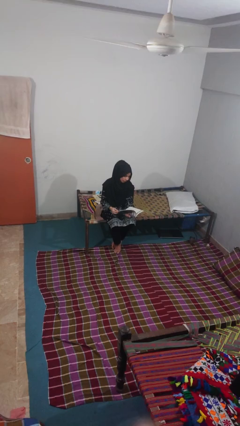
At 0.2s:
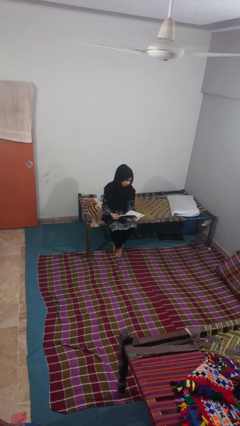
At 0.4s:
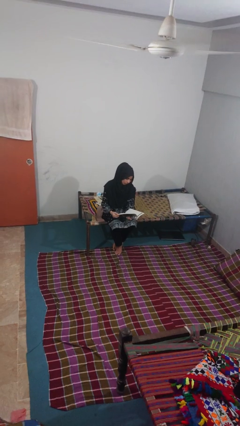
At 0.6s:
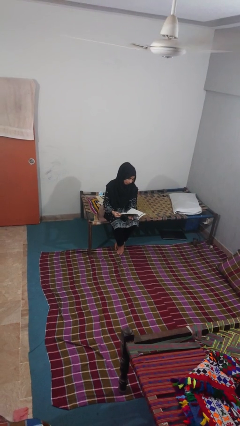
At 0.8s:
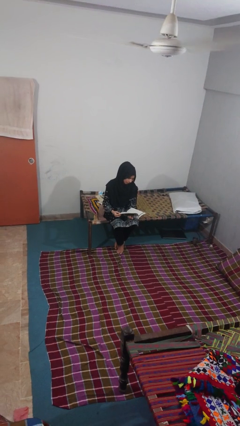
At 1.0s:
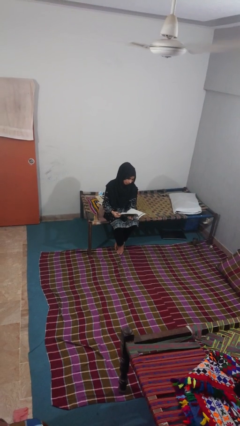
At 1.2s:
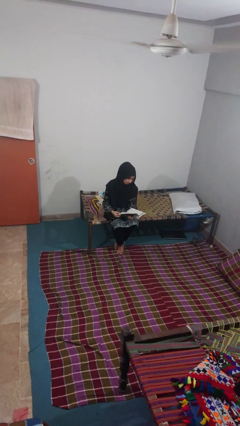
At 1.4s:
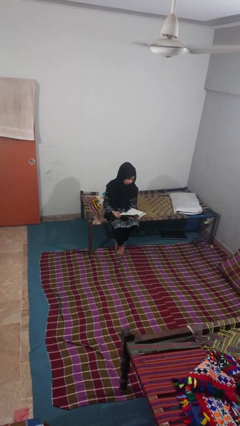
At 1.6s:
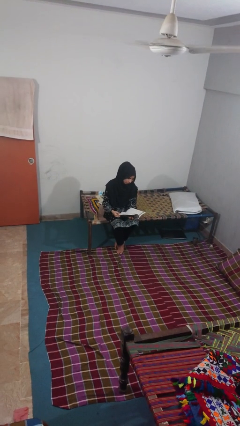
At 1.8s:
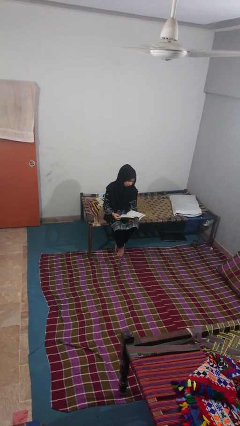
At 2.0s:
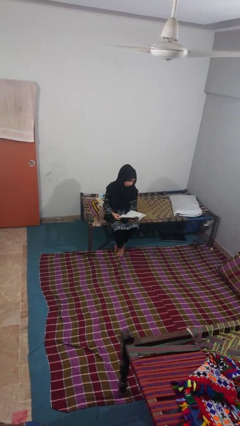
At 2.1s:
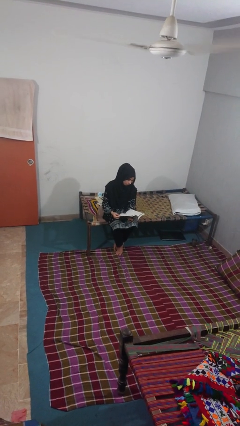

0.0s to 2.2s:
person reads book

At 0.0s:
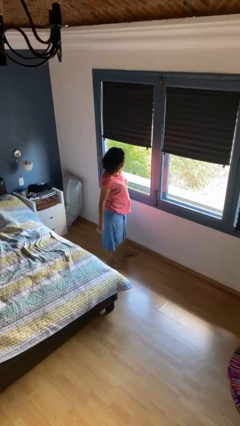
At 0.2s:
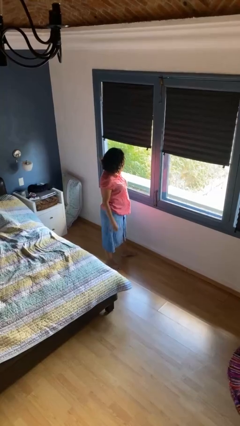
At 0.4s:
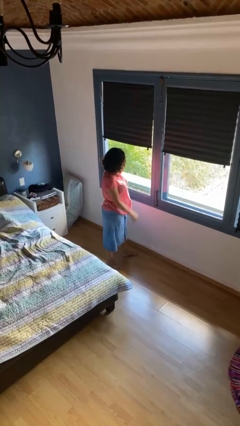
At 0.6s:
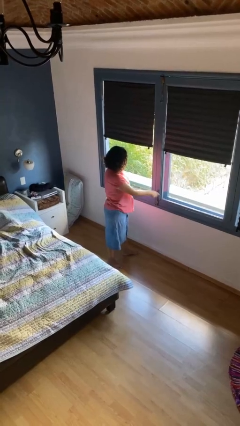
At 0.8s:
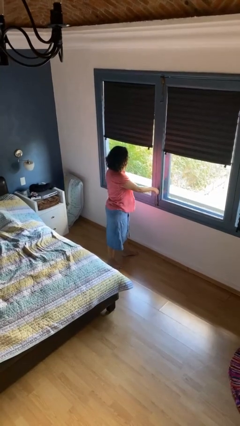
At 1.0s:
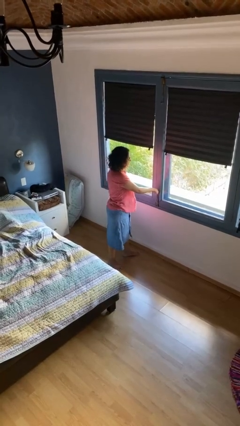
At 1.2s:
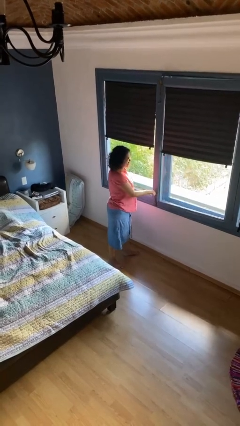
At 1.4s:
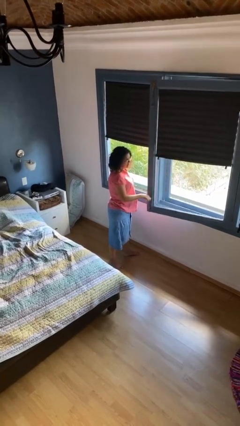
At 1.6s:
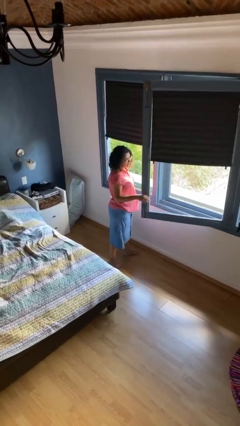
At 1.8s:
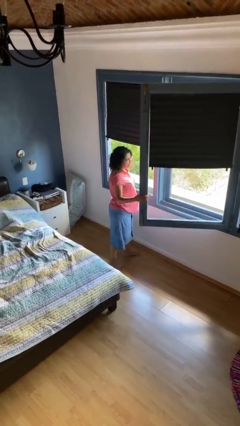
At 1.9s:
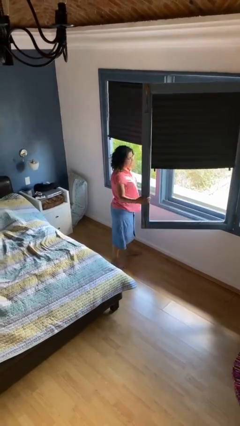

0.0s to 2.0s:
person opens home window

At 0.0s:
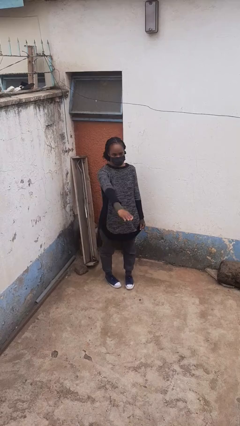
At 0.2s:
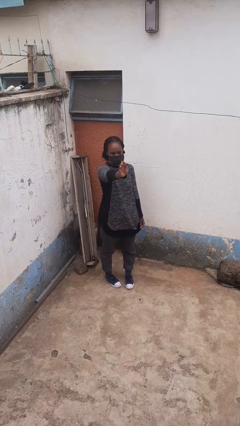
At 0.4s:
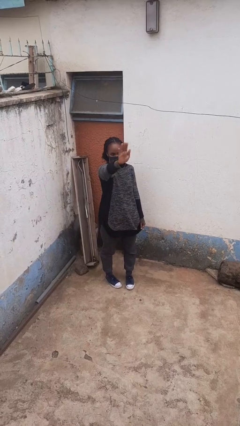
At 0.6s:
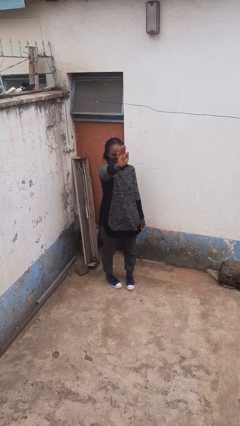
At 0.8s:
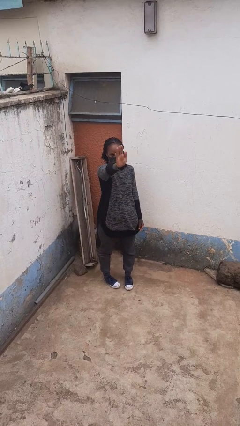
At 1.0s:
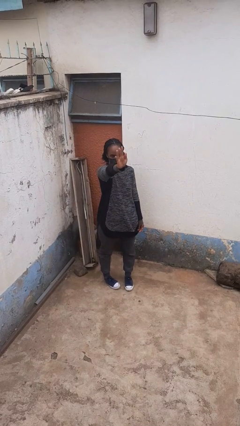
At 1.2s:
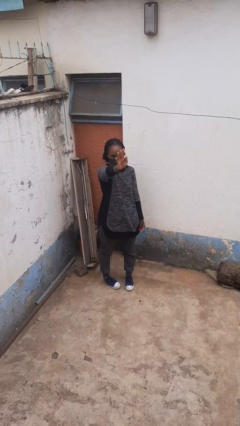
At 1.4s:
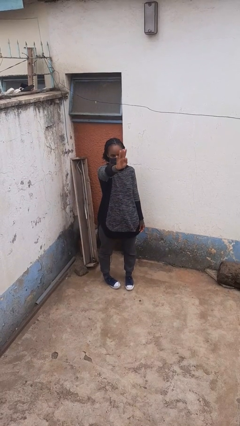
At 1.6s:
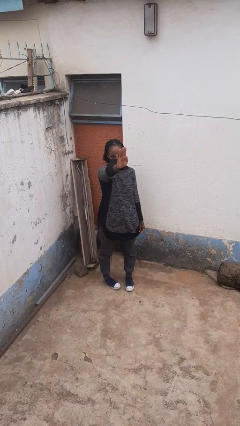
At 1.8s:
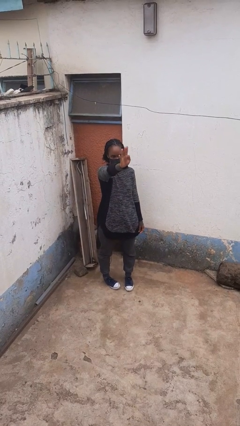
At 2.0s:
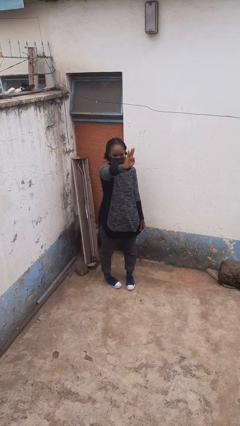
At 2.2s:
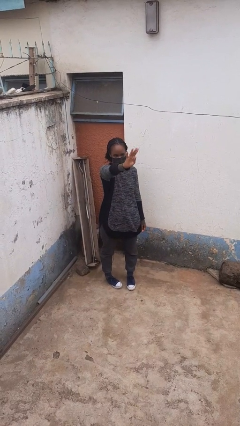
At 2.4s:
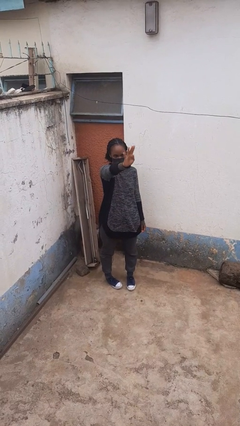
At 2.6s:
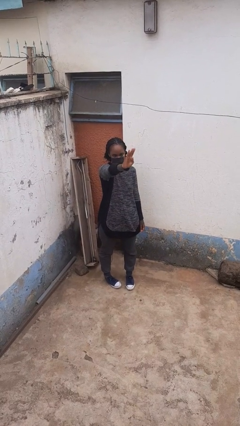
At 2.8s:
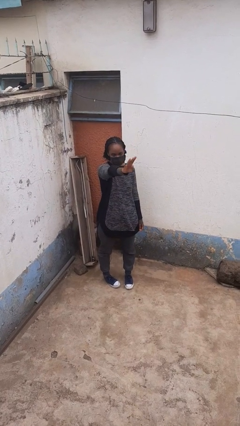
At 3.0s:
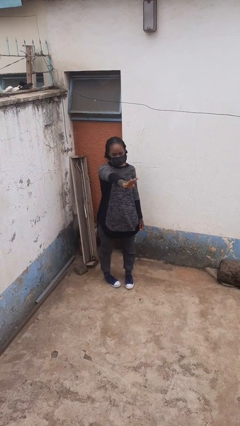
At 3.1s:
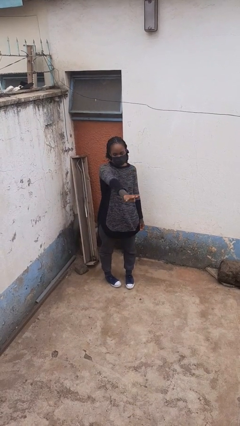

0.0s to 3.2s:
person waves at person

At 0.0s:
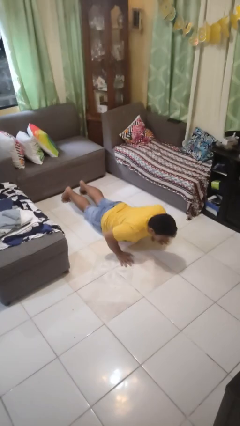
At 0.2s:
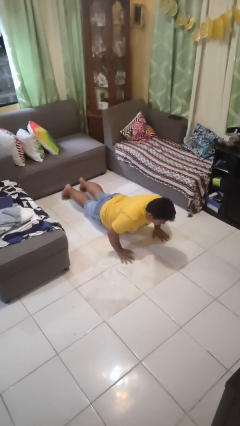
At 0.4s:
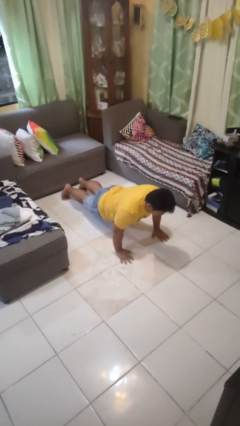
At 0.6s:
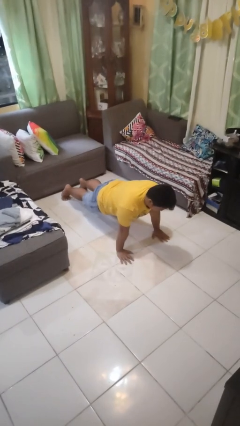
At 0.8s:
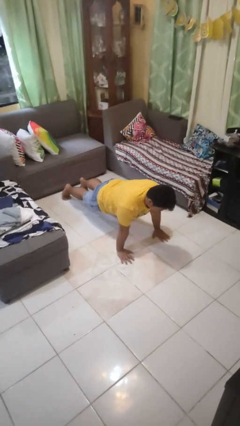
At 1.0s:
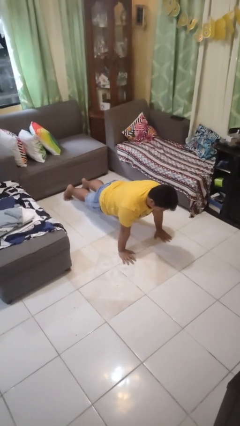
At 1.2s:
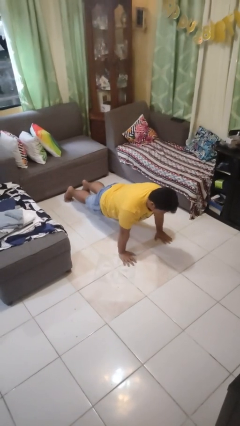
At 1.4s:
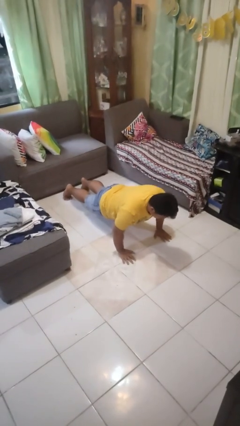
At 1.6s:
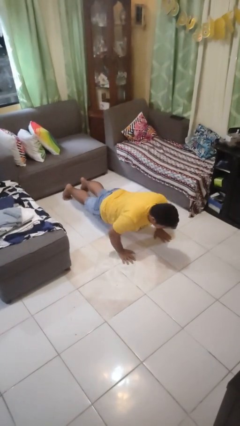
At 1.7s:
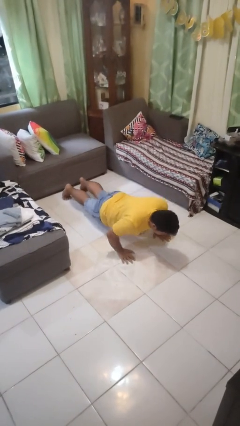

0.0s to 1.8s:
person exercises with pushup

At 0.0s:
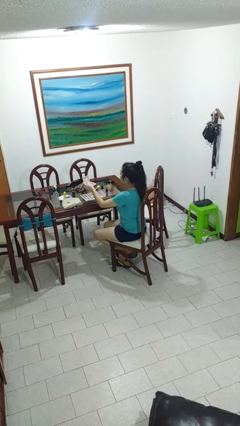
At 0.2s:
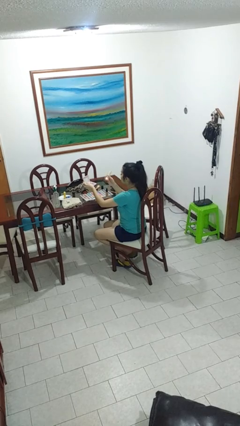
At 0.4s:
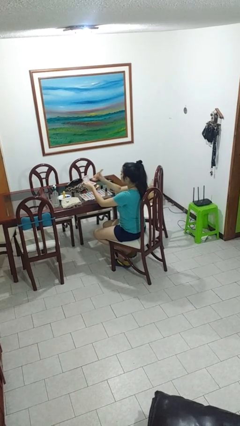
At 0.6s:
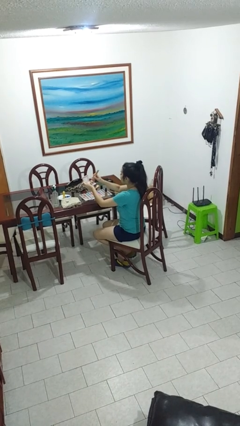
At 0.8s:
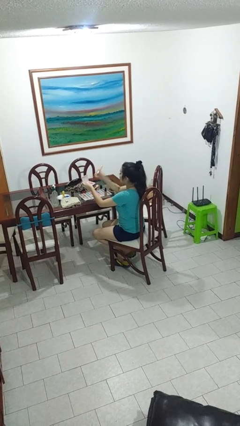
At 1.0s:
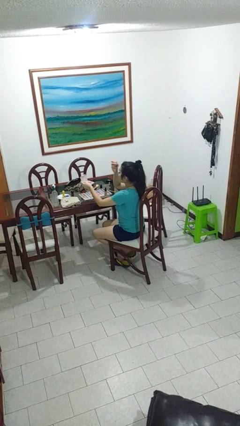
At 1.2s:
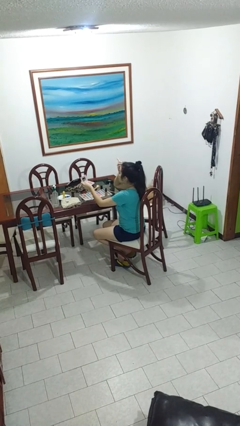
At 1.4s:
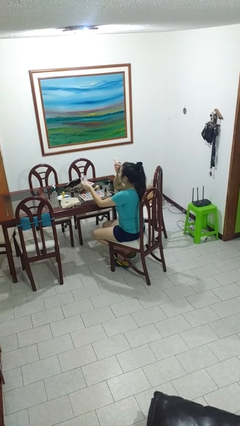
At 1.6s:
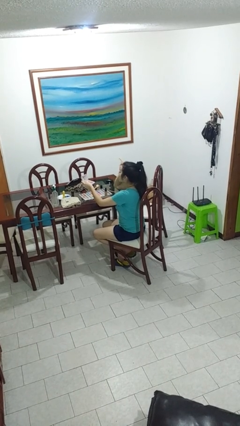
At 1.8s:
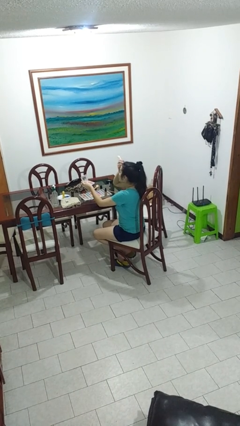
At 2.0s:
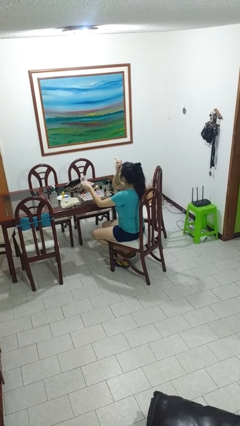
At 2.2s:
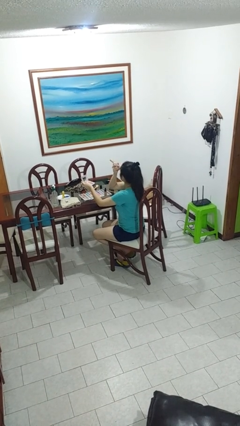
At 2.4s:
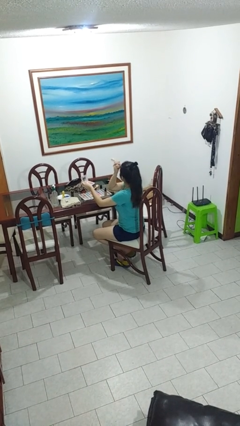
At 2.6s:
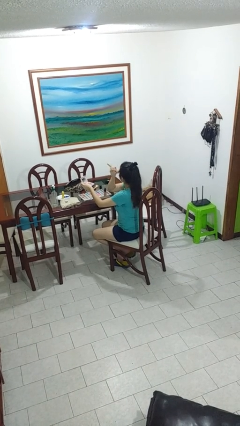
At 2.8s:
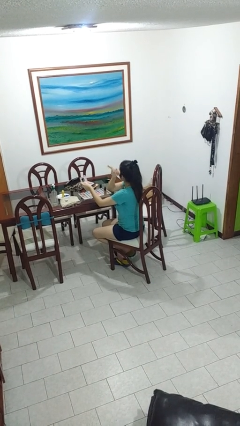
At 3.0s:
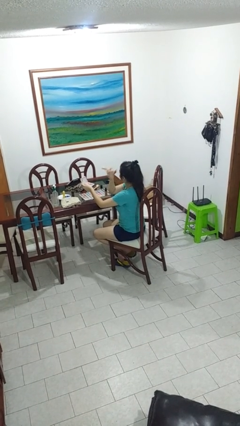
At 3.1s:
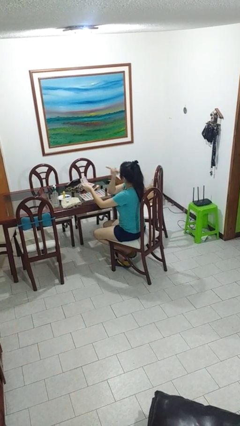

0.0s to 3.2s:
person applies foundation makeup

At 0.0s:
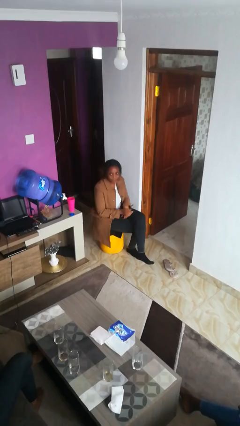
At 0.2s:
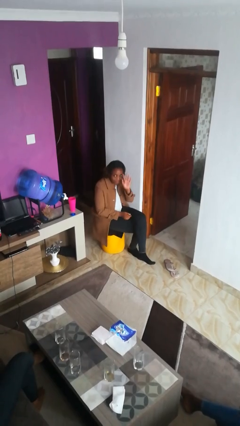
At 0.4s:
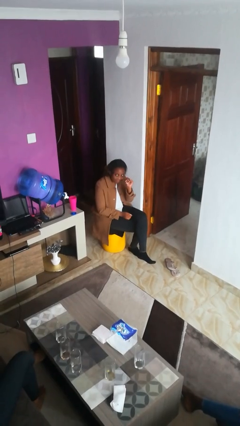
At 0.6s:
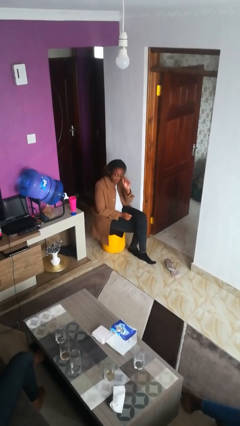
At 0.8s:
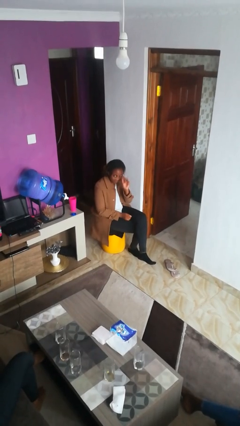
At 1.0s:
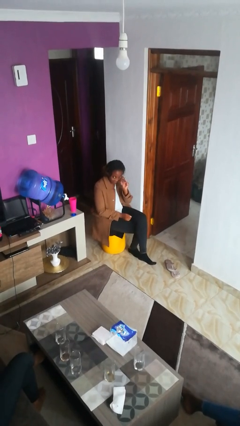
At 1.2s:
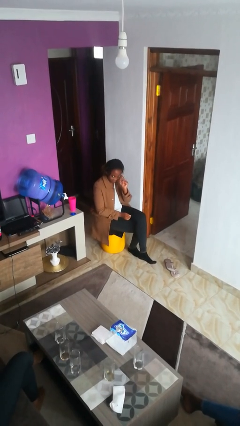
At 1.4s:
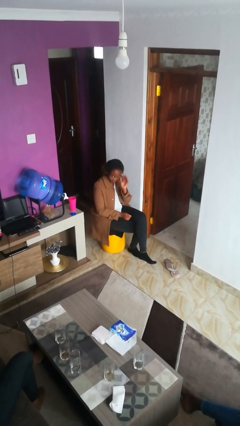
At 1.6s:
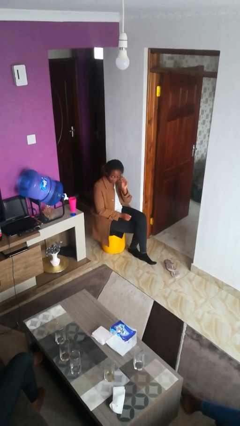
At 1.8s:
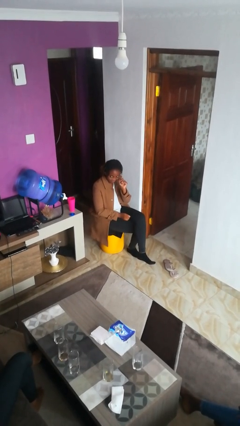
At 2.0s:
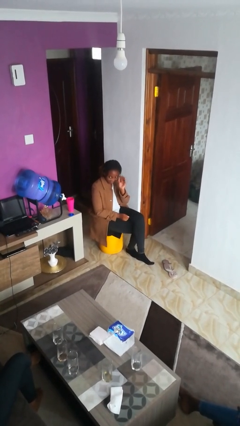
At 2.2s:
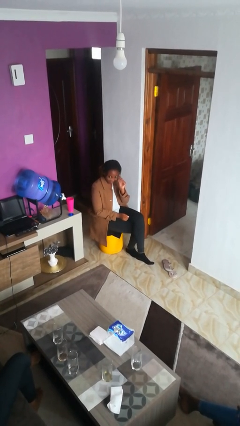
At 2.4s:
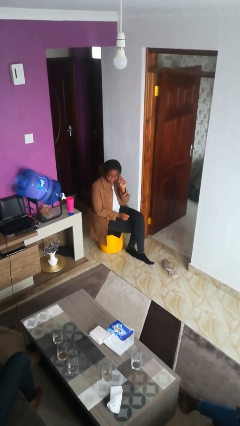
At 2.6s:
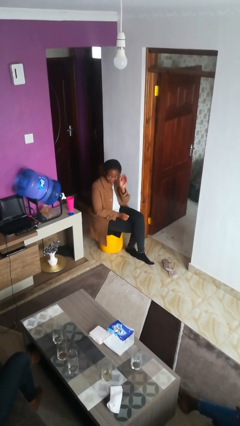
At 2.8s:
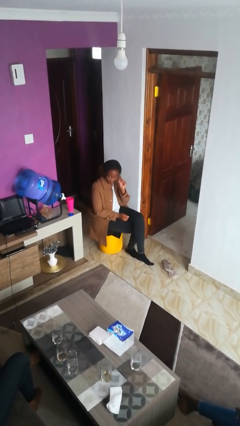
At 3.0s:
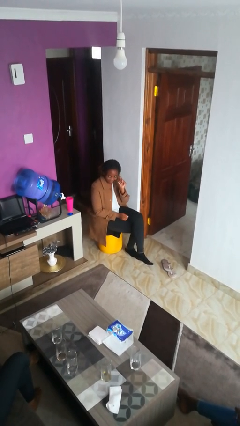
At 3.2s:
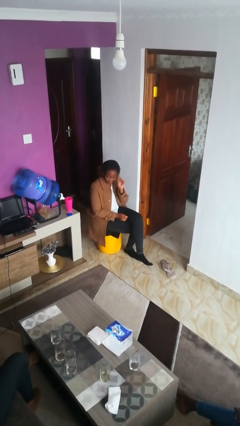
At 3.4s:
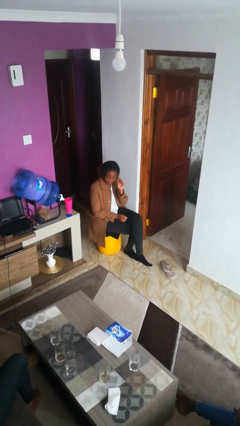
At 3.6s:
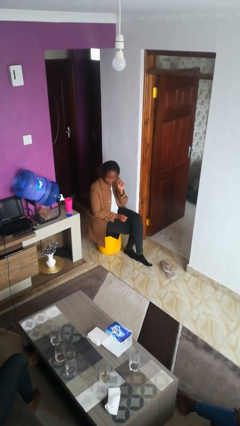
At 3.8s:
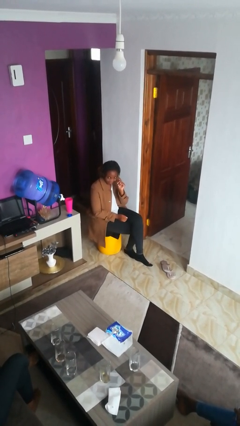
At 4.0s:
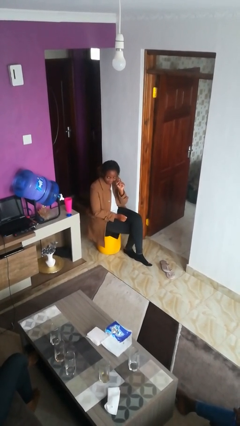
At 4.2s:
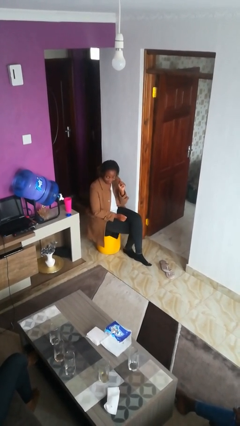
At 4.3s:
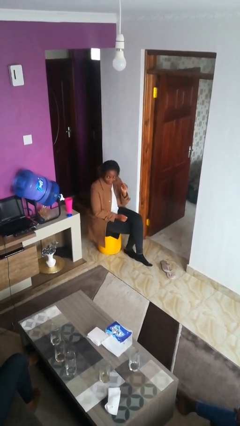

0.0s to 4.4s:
person gestures come here

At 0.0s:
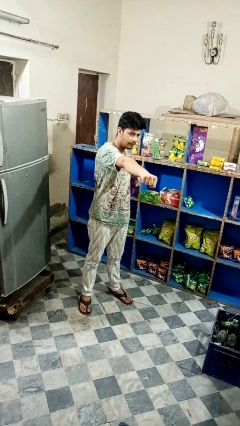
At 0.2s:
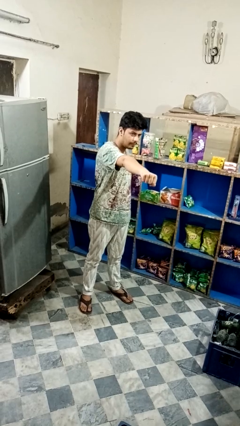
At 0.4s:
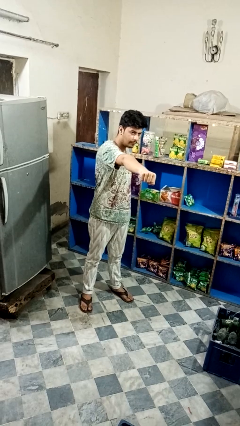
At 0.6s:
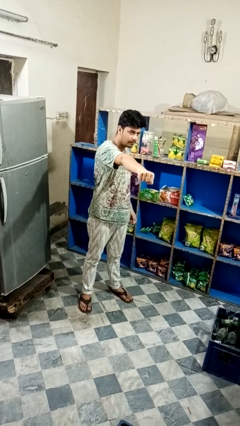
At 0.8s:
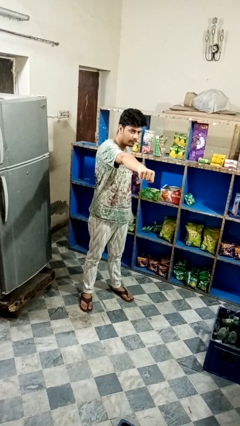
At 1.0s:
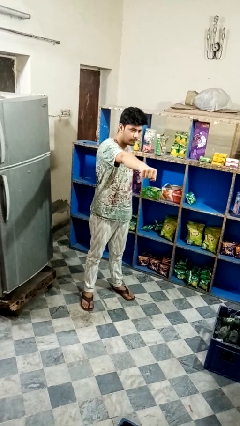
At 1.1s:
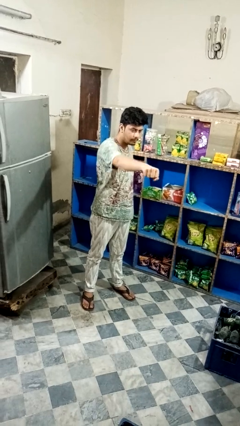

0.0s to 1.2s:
person punches
